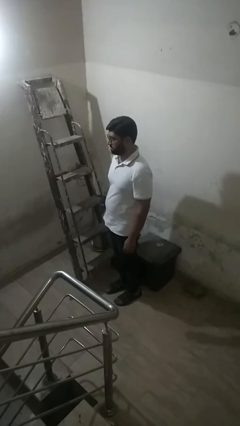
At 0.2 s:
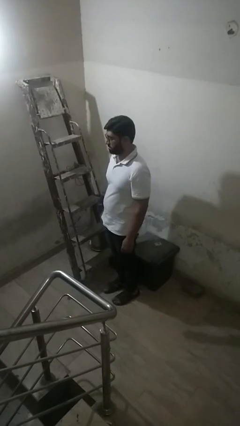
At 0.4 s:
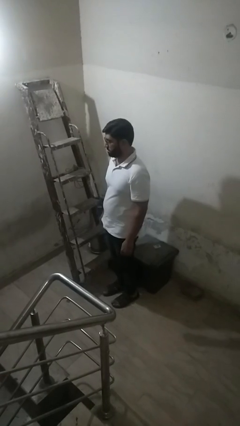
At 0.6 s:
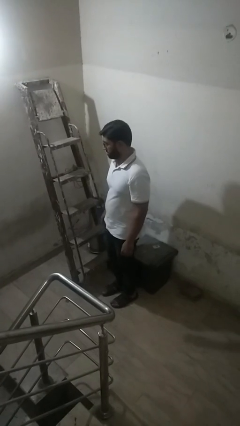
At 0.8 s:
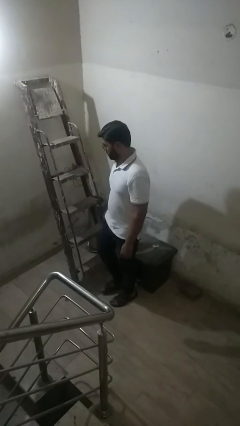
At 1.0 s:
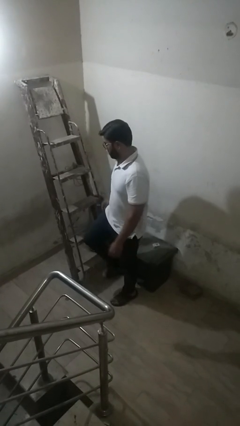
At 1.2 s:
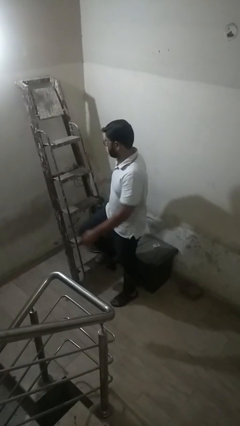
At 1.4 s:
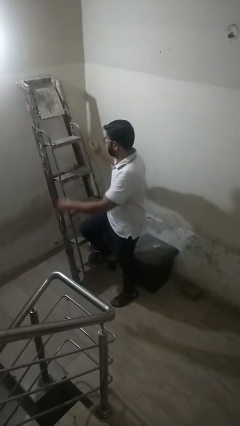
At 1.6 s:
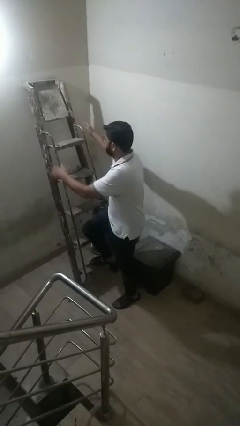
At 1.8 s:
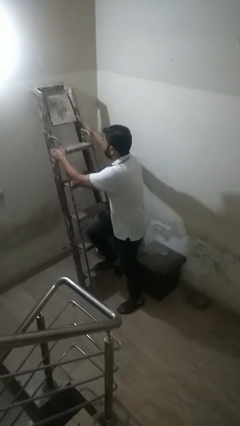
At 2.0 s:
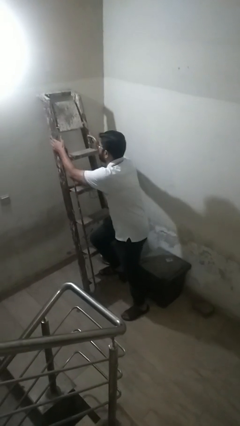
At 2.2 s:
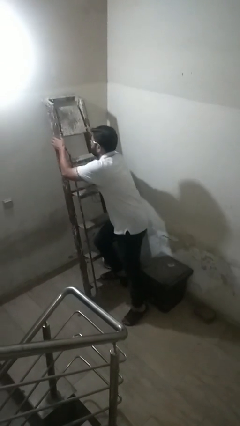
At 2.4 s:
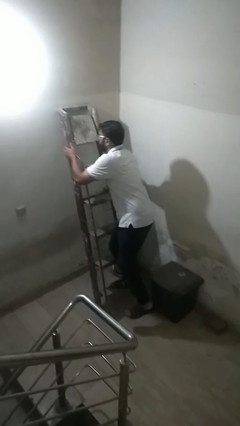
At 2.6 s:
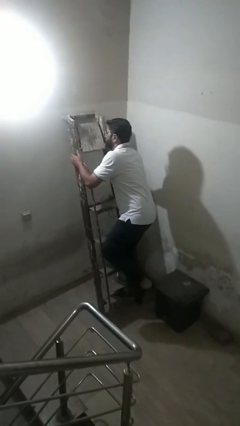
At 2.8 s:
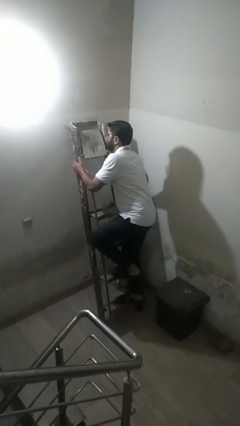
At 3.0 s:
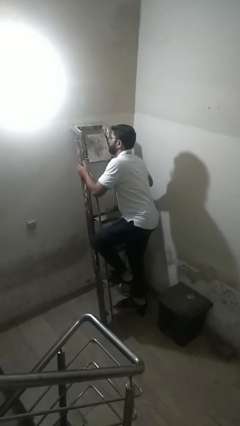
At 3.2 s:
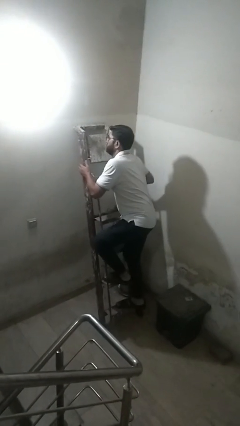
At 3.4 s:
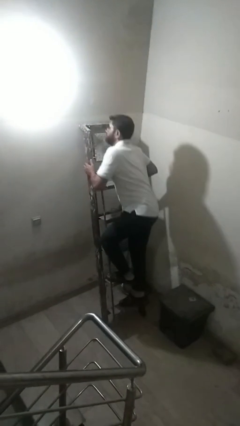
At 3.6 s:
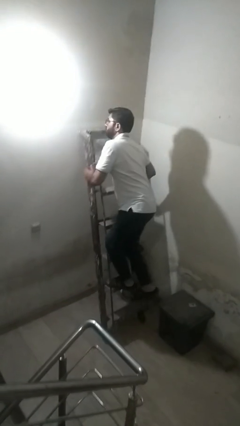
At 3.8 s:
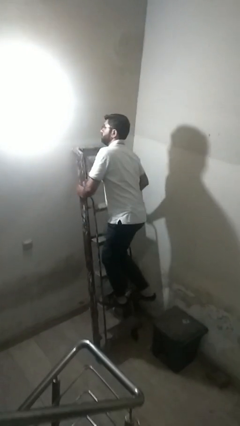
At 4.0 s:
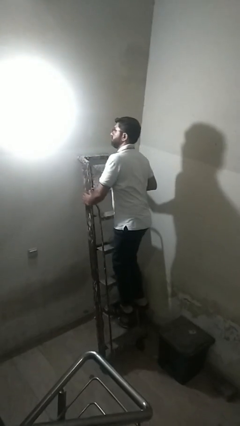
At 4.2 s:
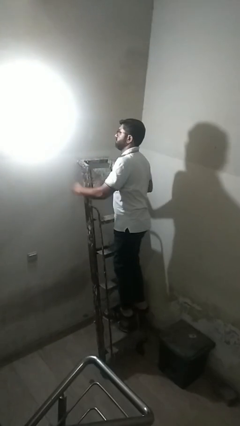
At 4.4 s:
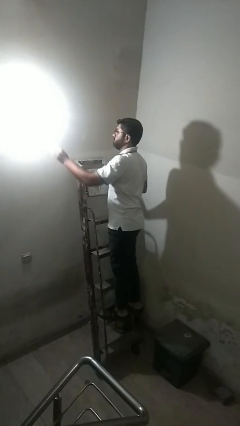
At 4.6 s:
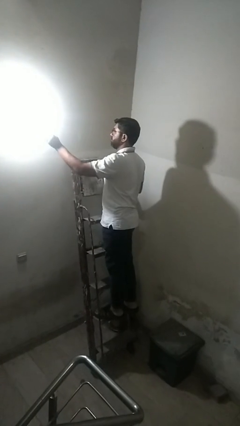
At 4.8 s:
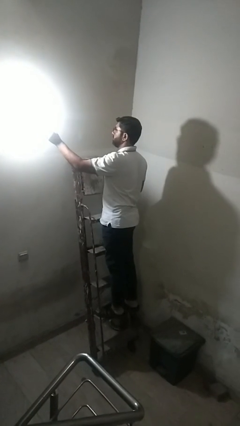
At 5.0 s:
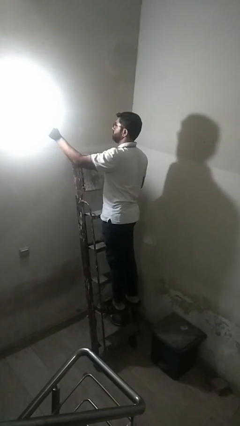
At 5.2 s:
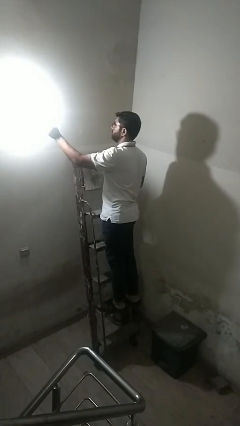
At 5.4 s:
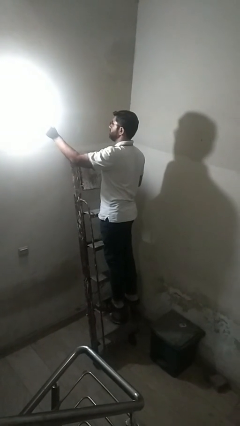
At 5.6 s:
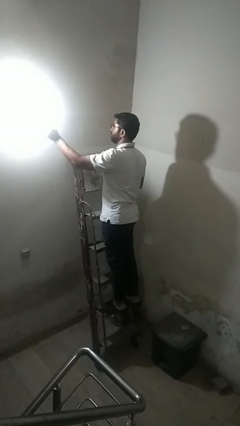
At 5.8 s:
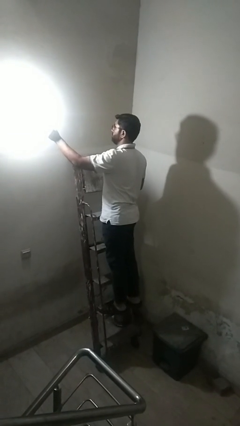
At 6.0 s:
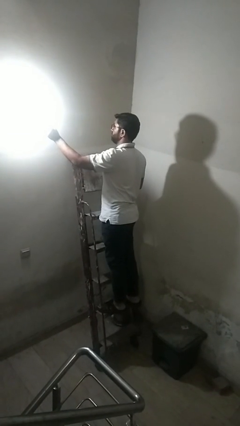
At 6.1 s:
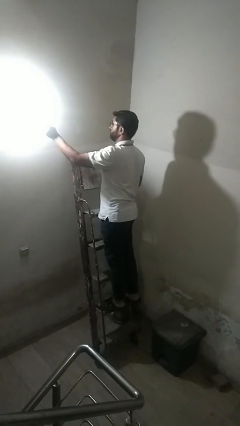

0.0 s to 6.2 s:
person climbs up ladder

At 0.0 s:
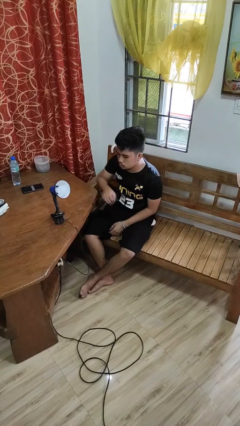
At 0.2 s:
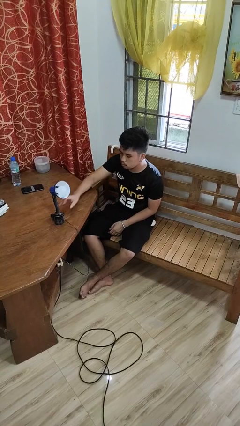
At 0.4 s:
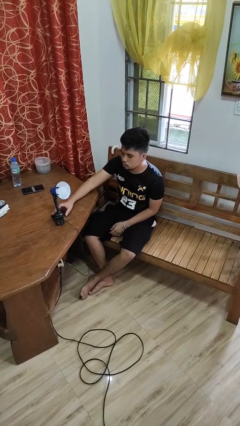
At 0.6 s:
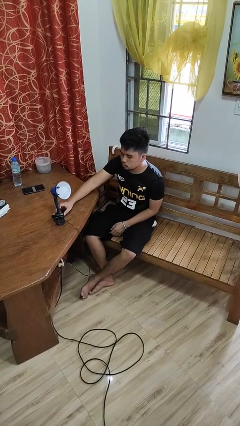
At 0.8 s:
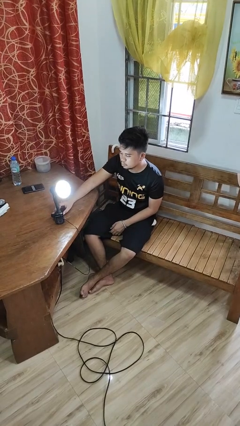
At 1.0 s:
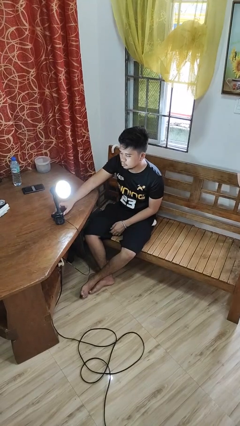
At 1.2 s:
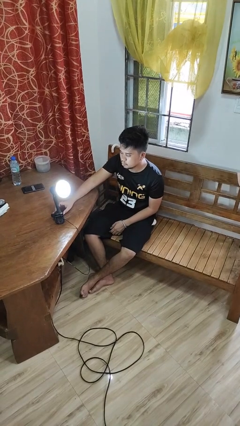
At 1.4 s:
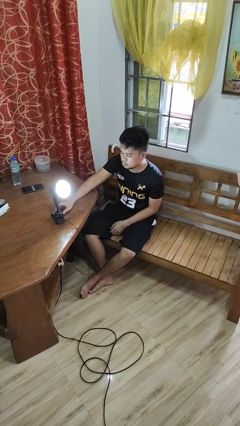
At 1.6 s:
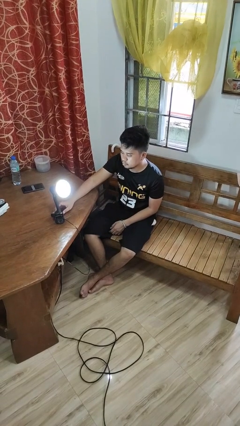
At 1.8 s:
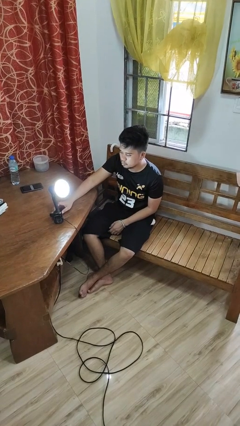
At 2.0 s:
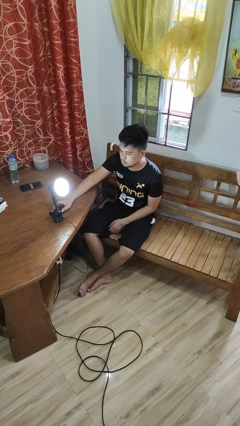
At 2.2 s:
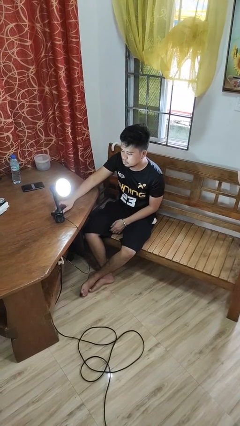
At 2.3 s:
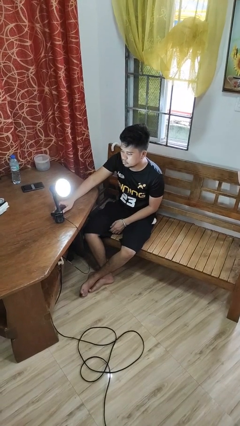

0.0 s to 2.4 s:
person turns on lamp

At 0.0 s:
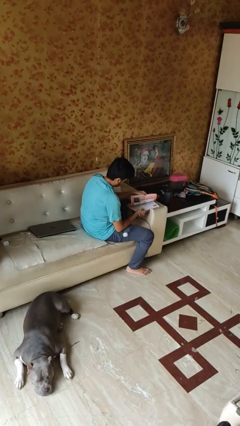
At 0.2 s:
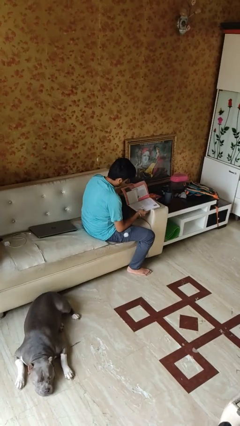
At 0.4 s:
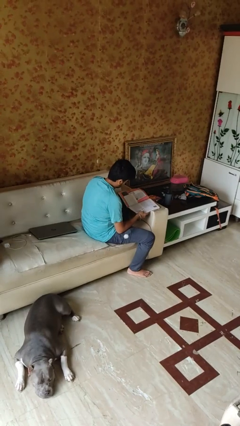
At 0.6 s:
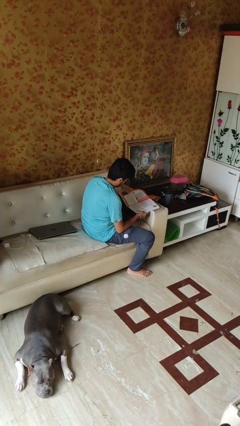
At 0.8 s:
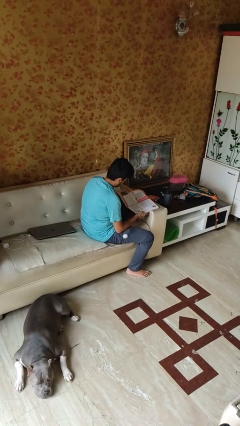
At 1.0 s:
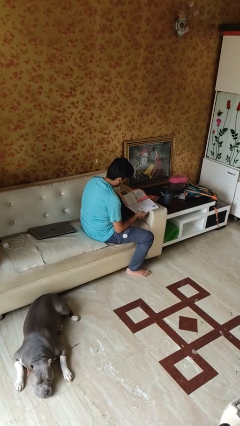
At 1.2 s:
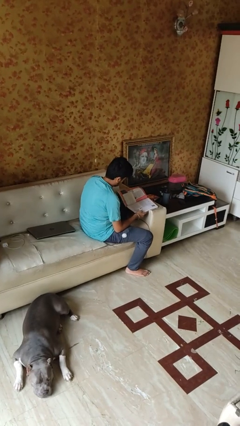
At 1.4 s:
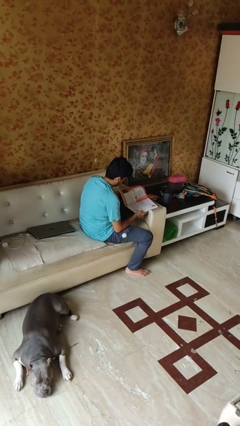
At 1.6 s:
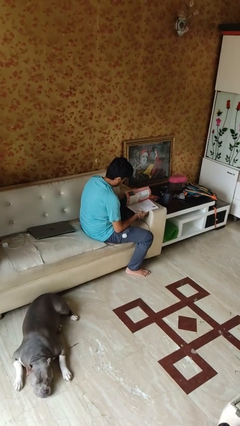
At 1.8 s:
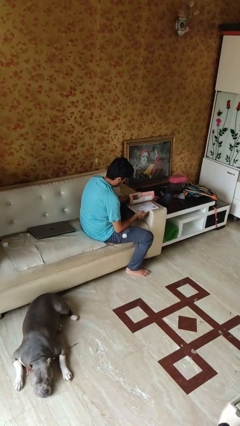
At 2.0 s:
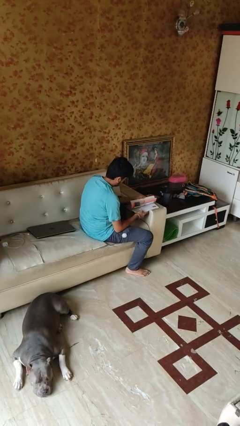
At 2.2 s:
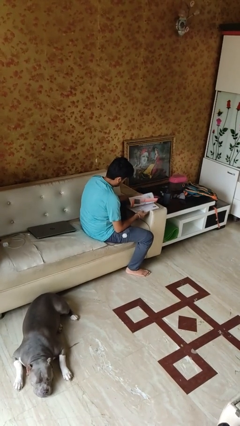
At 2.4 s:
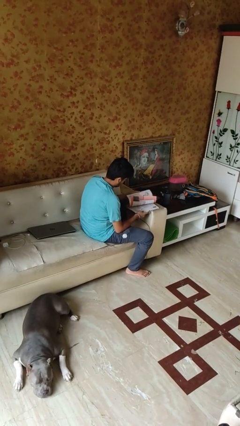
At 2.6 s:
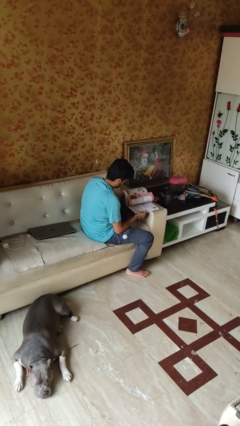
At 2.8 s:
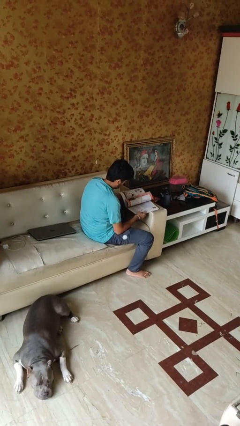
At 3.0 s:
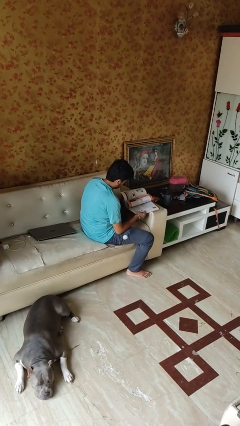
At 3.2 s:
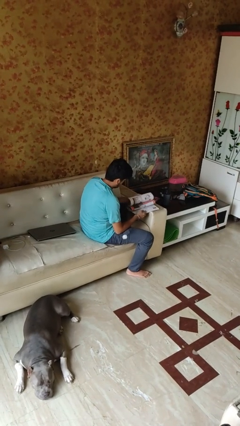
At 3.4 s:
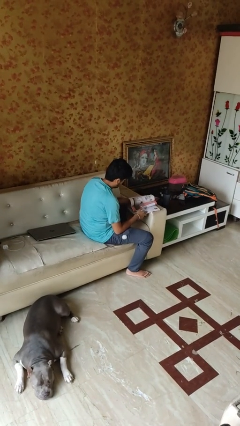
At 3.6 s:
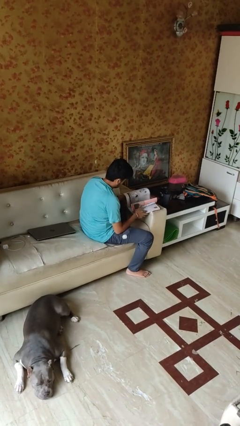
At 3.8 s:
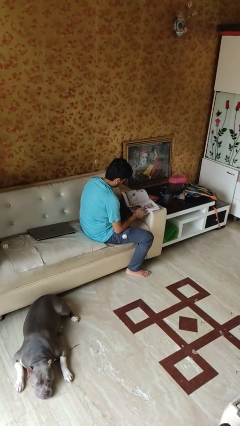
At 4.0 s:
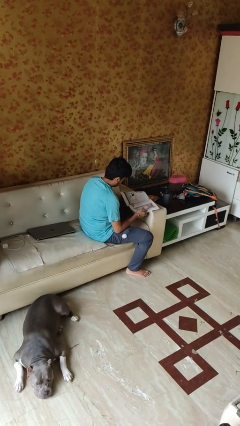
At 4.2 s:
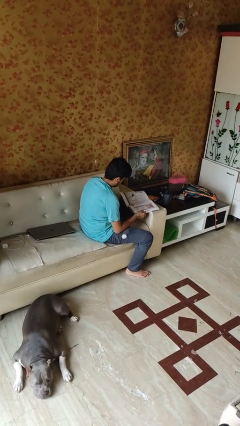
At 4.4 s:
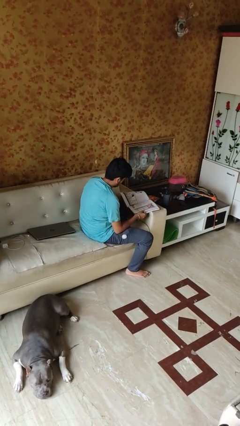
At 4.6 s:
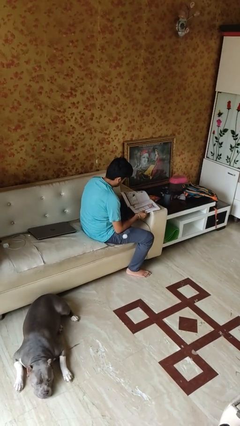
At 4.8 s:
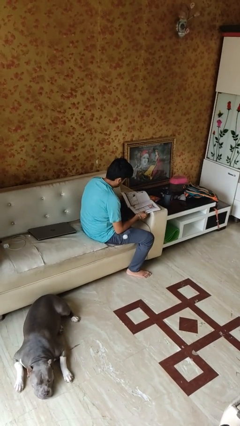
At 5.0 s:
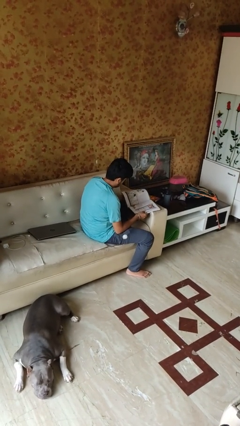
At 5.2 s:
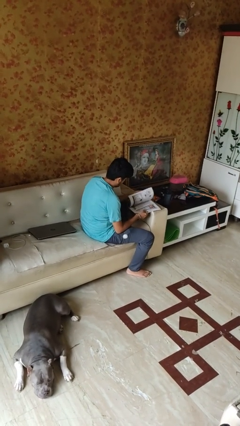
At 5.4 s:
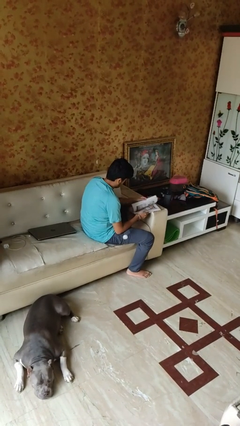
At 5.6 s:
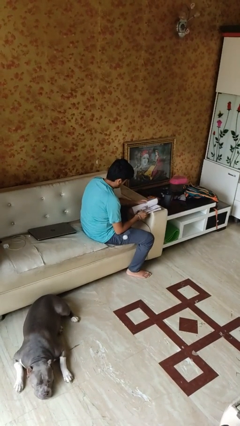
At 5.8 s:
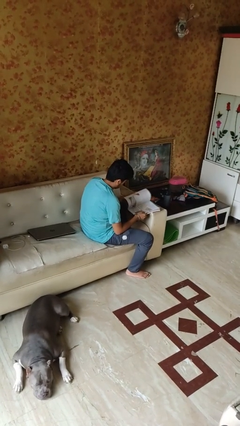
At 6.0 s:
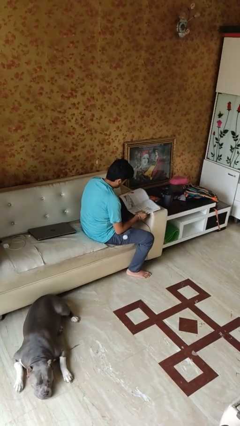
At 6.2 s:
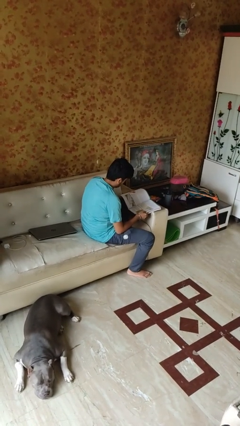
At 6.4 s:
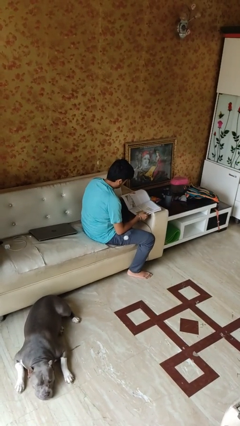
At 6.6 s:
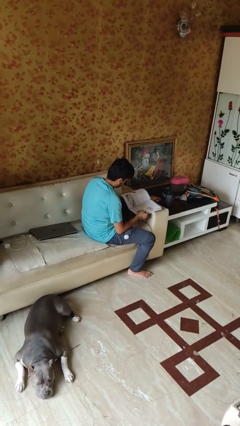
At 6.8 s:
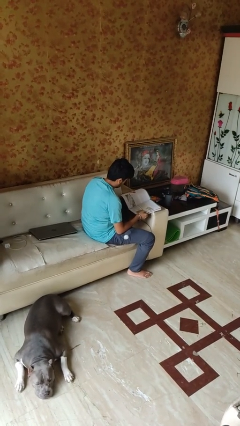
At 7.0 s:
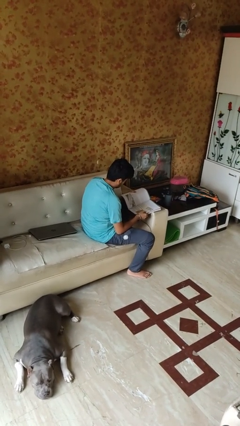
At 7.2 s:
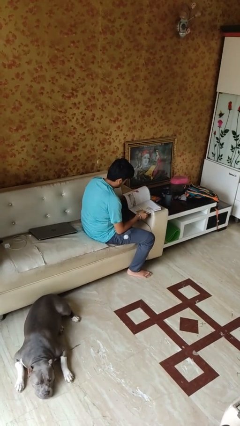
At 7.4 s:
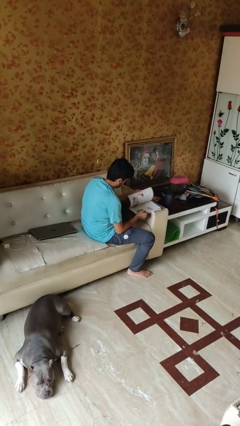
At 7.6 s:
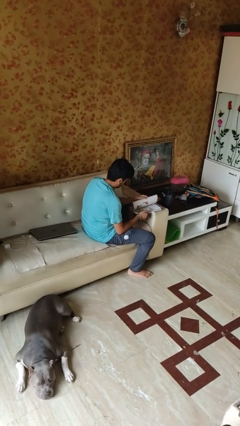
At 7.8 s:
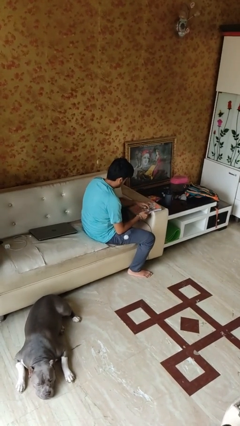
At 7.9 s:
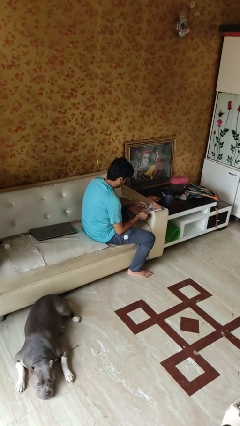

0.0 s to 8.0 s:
person reads magazine

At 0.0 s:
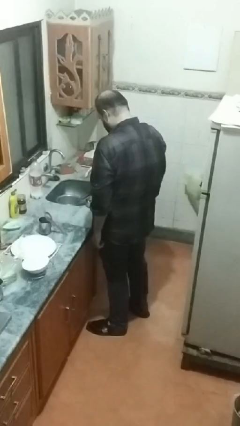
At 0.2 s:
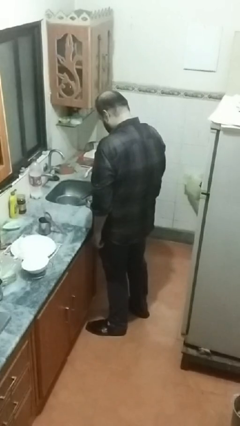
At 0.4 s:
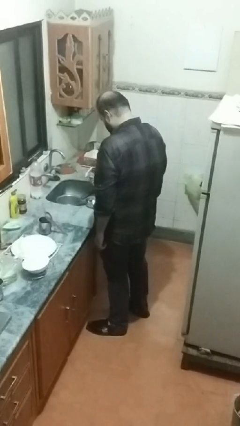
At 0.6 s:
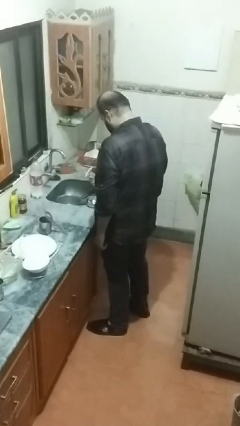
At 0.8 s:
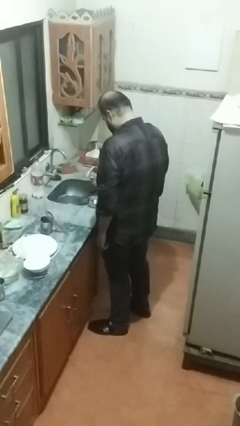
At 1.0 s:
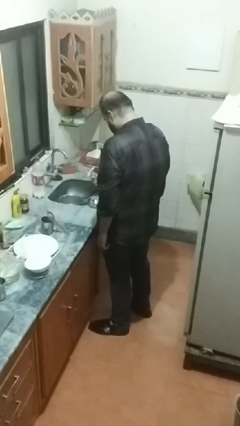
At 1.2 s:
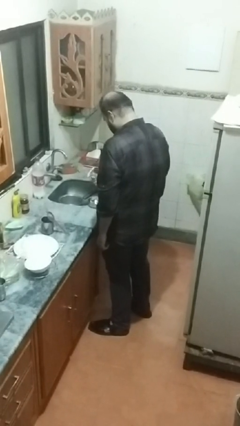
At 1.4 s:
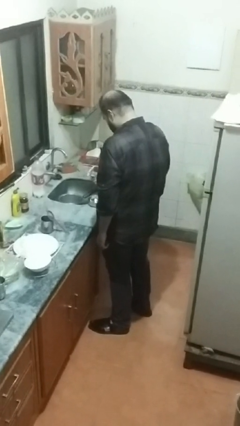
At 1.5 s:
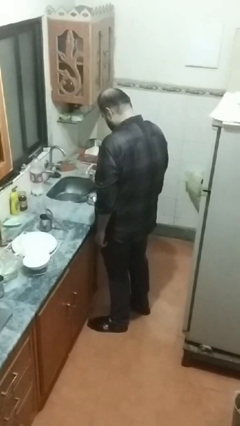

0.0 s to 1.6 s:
person pours into bowl
